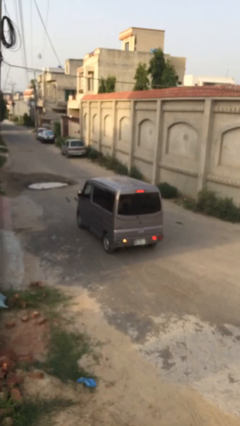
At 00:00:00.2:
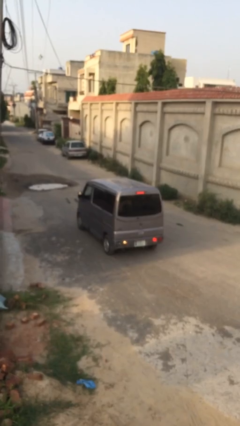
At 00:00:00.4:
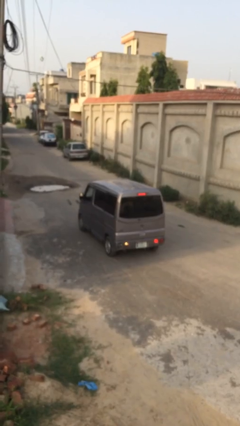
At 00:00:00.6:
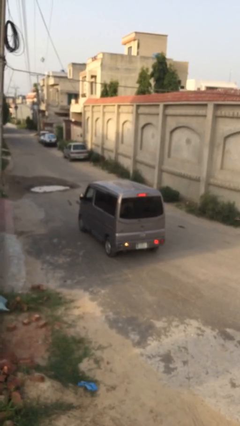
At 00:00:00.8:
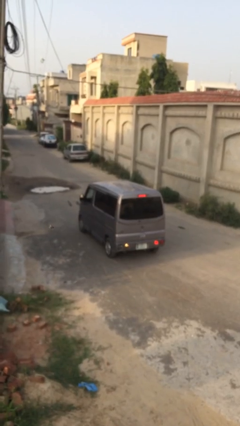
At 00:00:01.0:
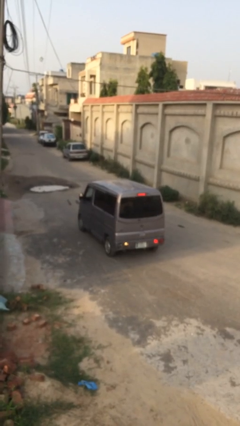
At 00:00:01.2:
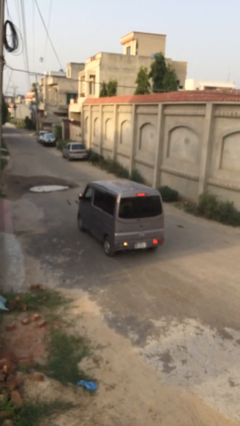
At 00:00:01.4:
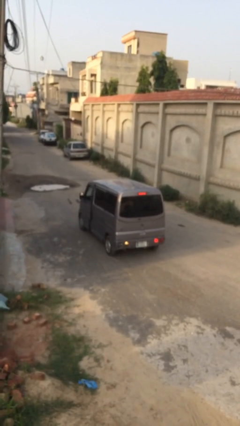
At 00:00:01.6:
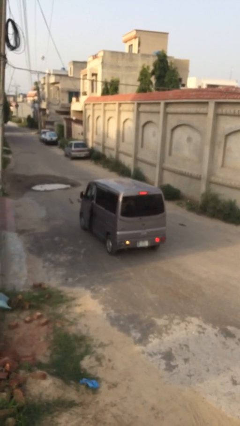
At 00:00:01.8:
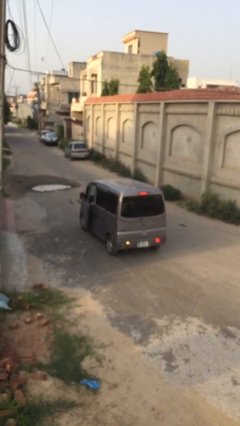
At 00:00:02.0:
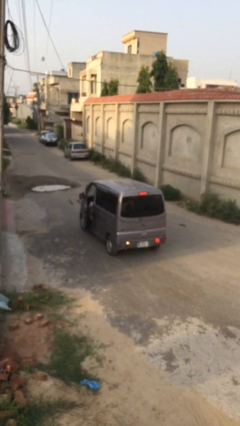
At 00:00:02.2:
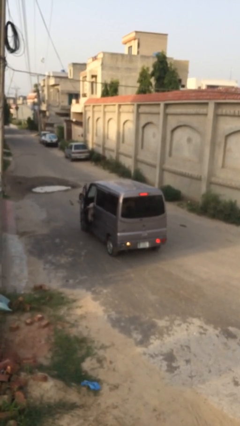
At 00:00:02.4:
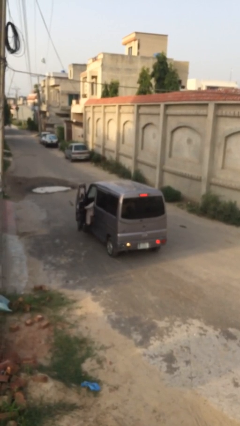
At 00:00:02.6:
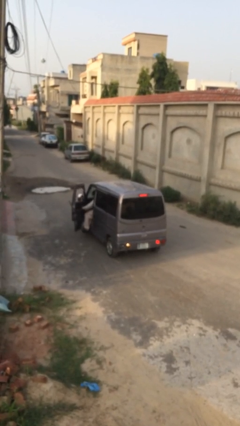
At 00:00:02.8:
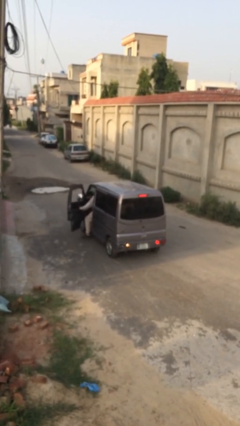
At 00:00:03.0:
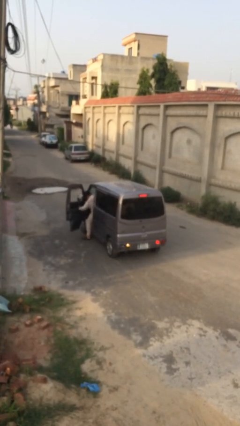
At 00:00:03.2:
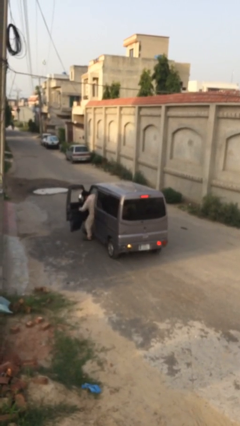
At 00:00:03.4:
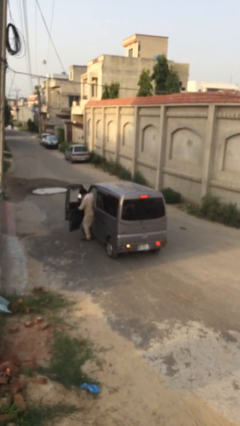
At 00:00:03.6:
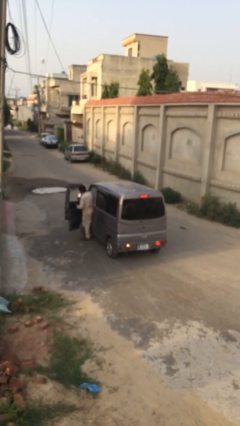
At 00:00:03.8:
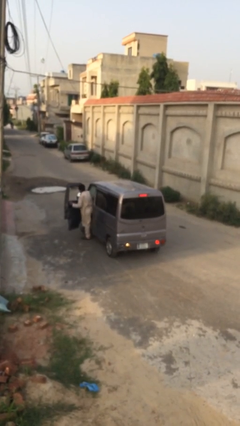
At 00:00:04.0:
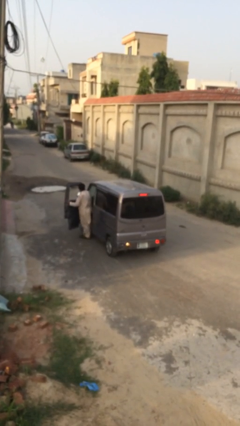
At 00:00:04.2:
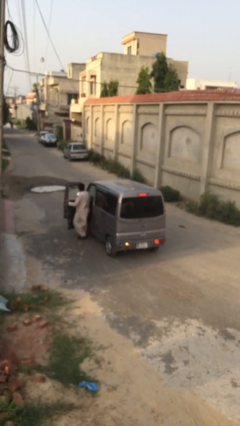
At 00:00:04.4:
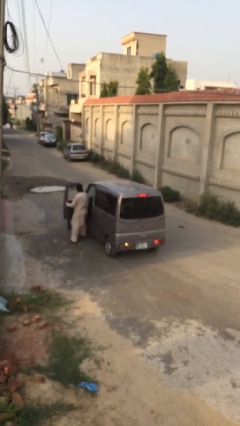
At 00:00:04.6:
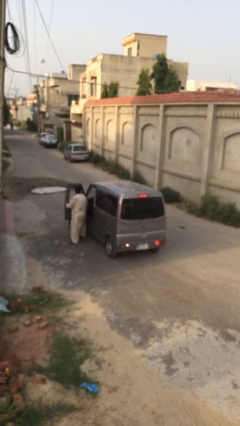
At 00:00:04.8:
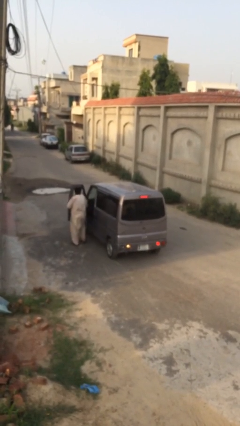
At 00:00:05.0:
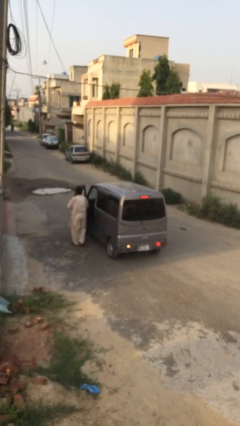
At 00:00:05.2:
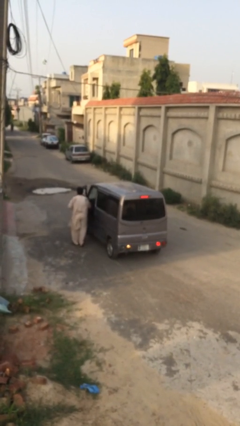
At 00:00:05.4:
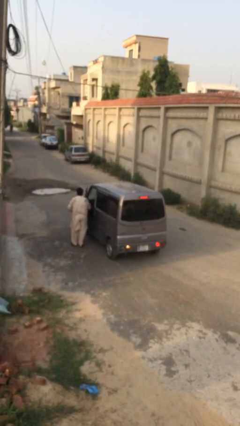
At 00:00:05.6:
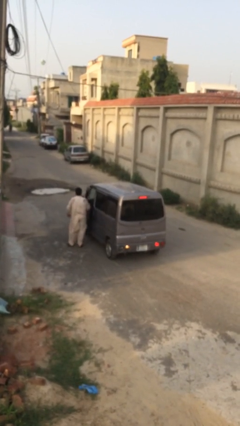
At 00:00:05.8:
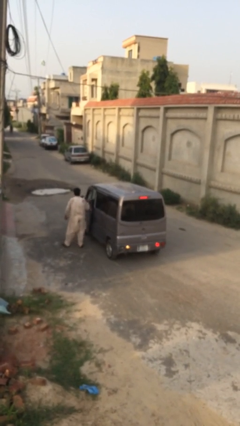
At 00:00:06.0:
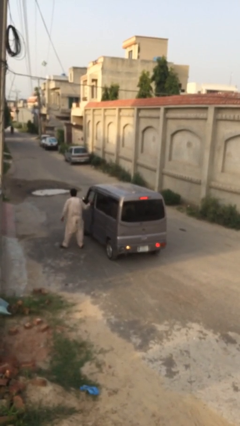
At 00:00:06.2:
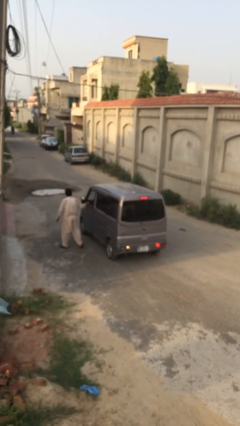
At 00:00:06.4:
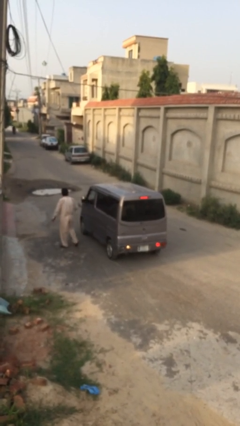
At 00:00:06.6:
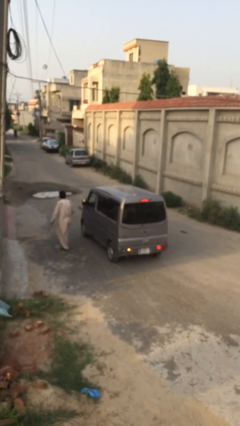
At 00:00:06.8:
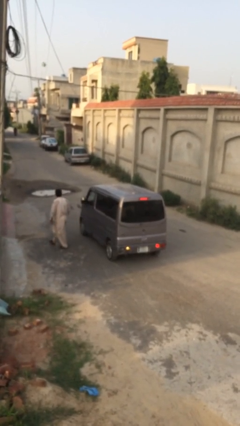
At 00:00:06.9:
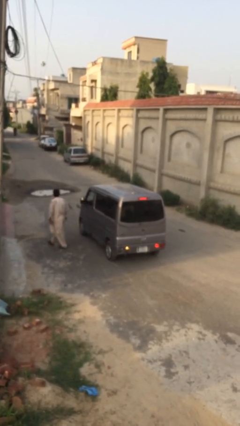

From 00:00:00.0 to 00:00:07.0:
car drops off person

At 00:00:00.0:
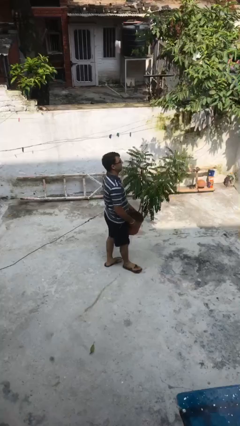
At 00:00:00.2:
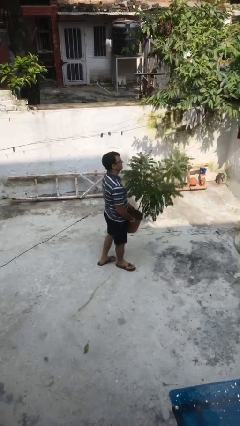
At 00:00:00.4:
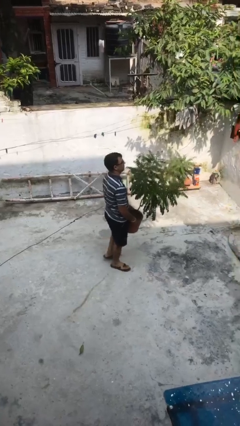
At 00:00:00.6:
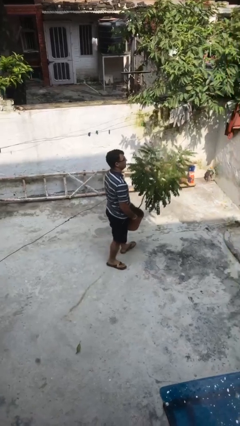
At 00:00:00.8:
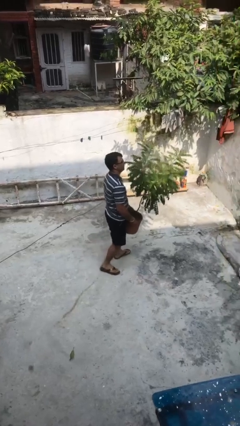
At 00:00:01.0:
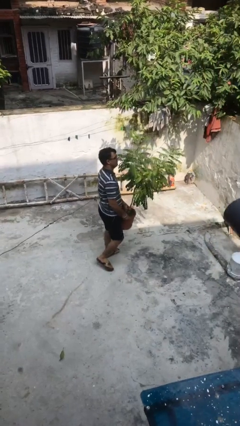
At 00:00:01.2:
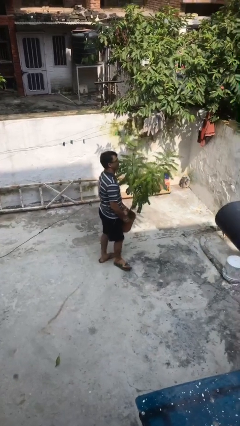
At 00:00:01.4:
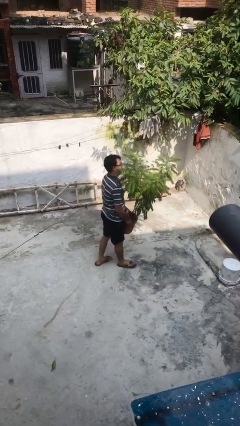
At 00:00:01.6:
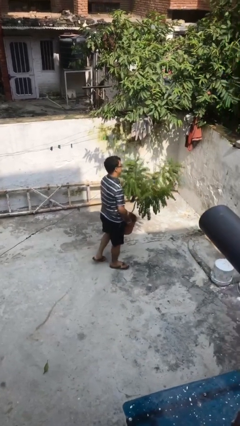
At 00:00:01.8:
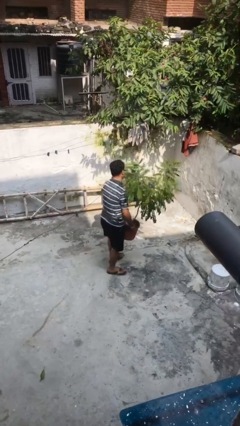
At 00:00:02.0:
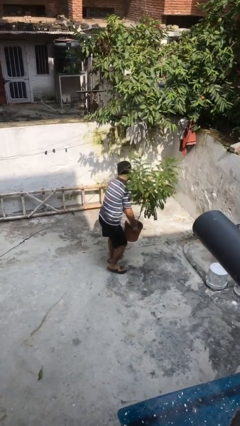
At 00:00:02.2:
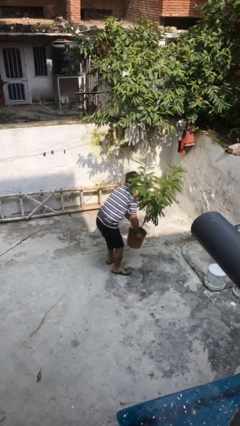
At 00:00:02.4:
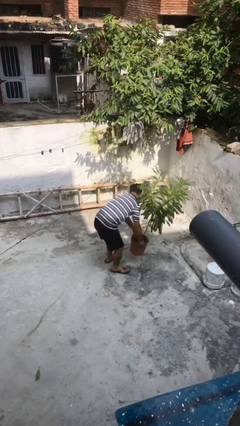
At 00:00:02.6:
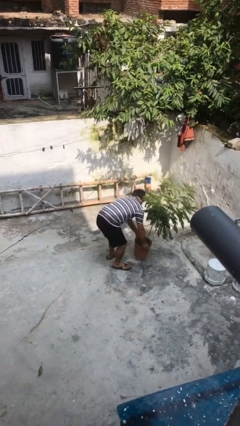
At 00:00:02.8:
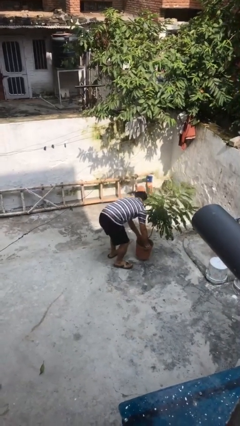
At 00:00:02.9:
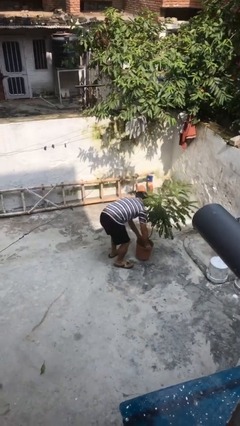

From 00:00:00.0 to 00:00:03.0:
person carries heavy object

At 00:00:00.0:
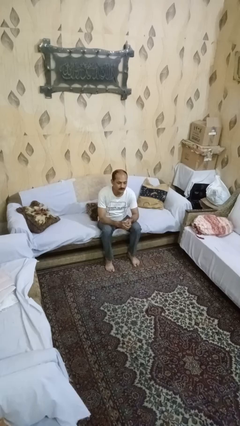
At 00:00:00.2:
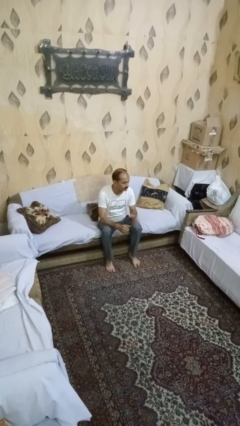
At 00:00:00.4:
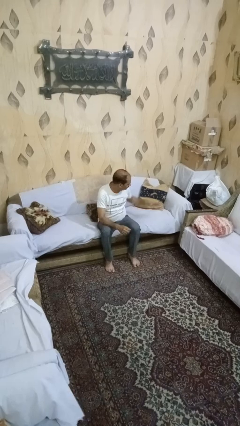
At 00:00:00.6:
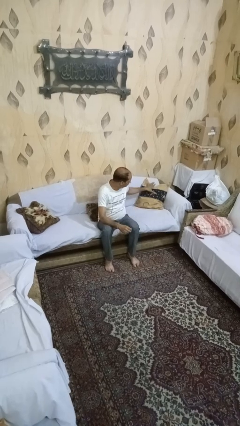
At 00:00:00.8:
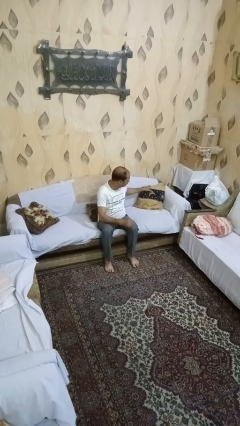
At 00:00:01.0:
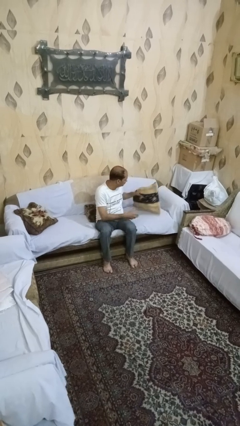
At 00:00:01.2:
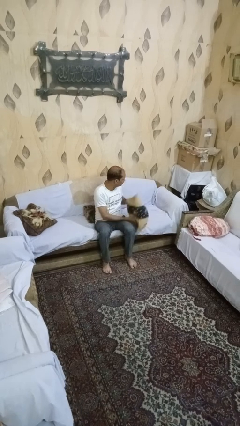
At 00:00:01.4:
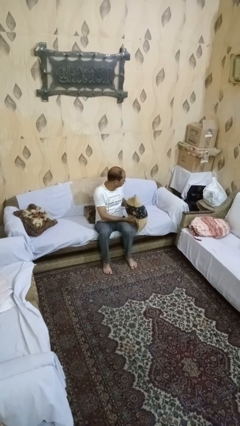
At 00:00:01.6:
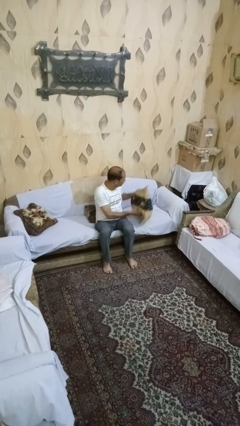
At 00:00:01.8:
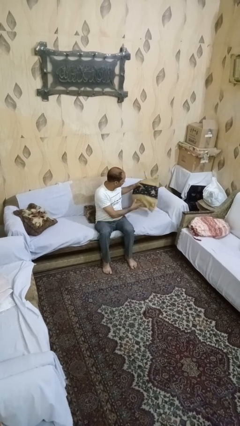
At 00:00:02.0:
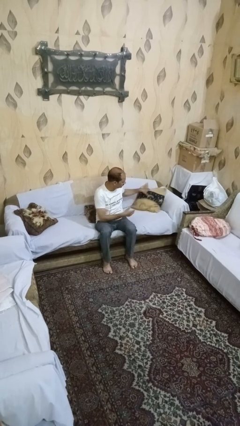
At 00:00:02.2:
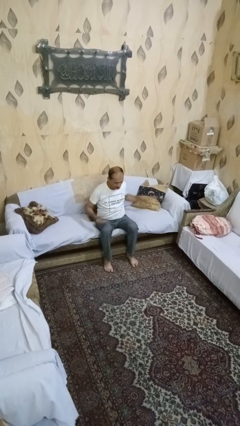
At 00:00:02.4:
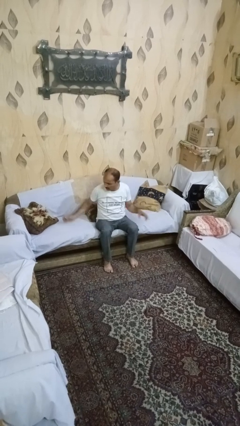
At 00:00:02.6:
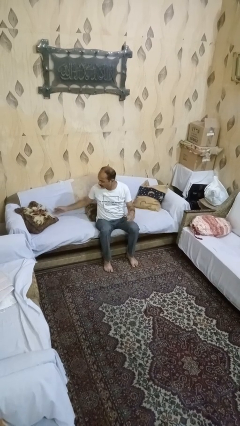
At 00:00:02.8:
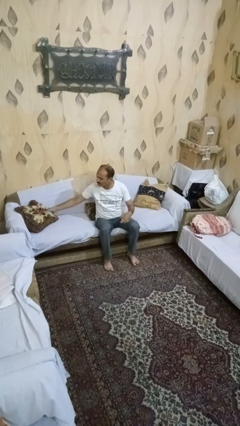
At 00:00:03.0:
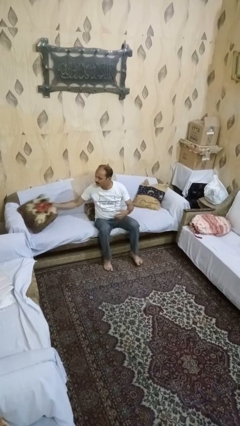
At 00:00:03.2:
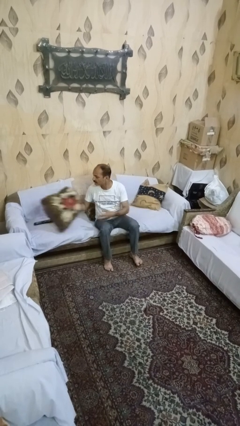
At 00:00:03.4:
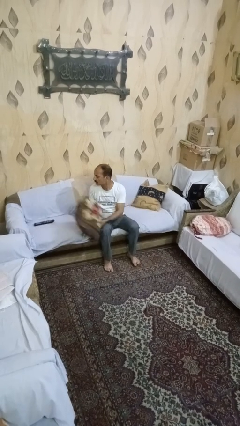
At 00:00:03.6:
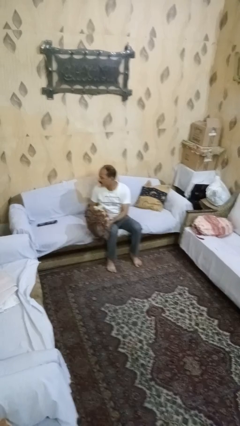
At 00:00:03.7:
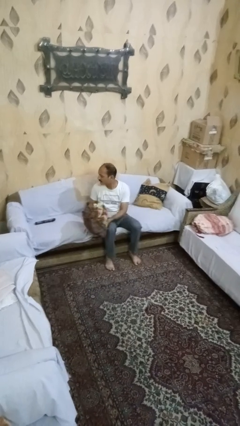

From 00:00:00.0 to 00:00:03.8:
person searches in couch

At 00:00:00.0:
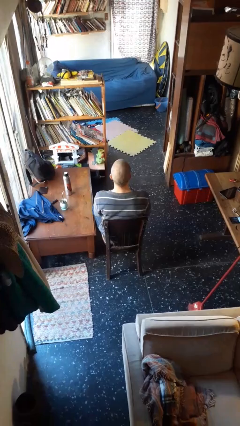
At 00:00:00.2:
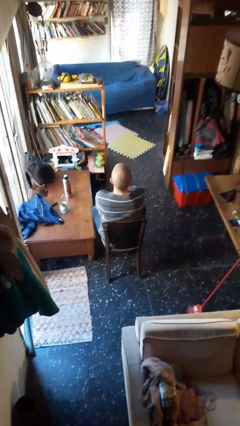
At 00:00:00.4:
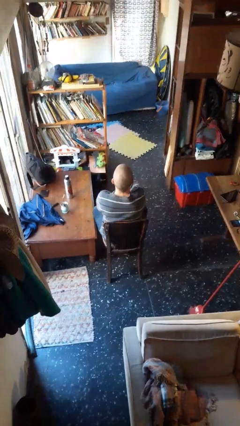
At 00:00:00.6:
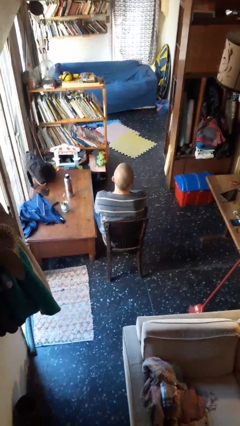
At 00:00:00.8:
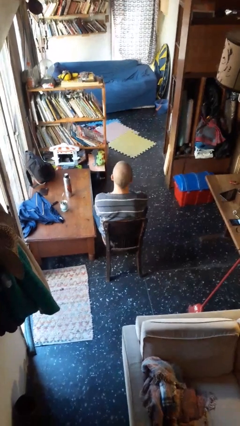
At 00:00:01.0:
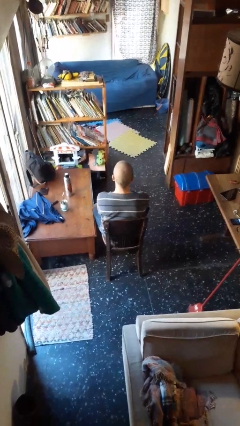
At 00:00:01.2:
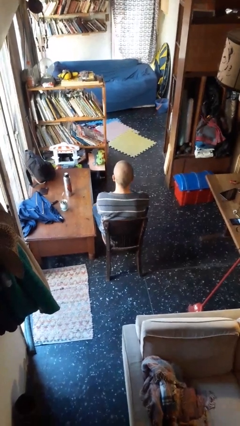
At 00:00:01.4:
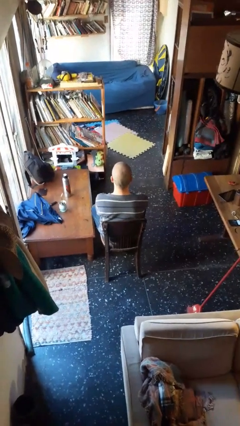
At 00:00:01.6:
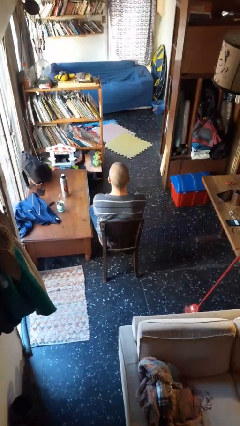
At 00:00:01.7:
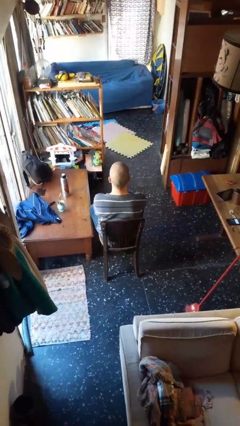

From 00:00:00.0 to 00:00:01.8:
person crosses arms

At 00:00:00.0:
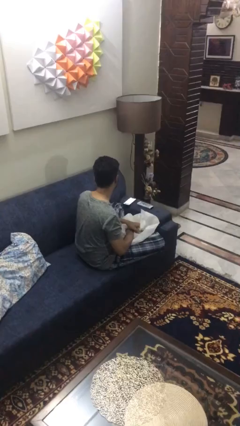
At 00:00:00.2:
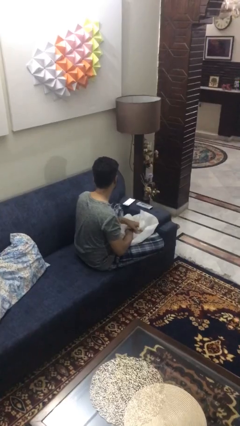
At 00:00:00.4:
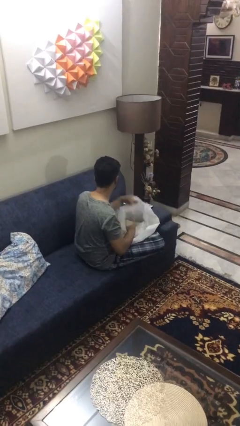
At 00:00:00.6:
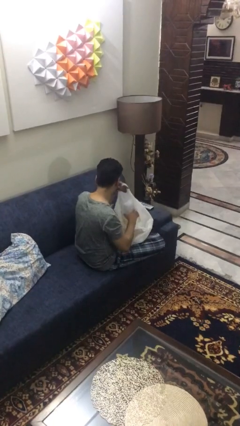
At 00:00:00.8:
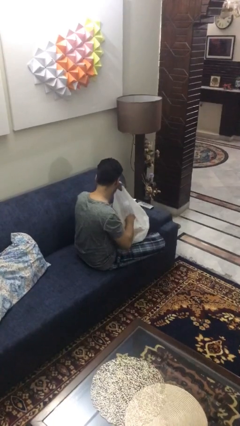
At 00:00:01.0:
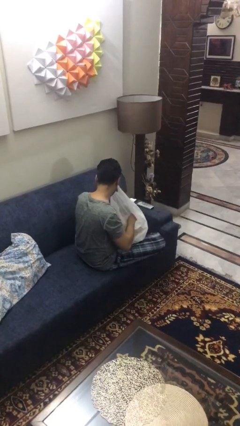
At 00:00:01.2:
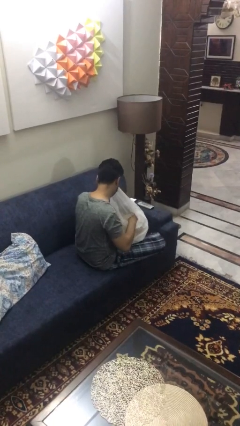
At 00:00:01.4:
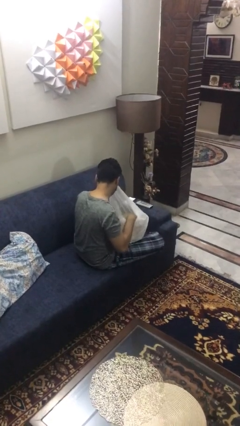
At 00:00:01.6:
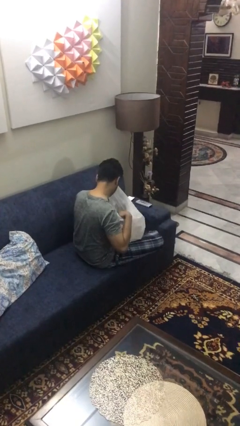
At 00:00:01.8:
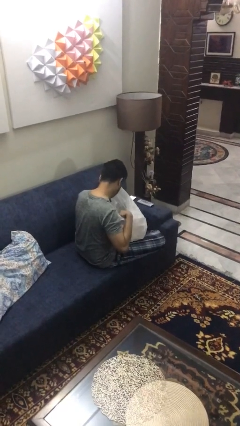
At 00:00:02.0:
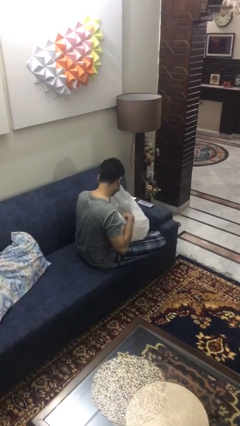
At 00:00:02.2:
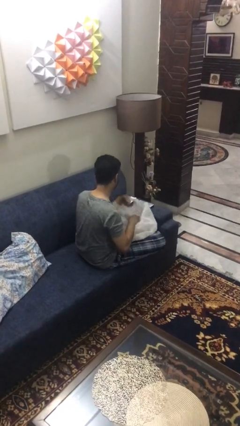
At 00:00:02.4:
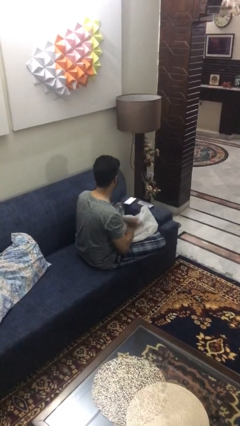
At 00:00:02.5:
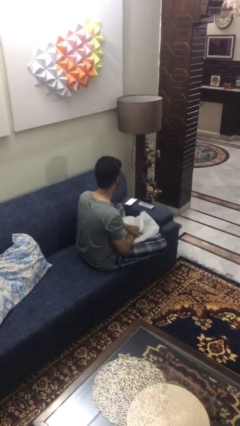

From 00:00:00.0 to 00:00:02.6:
person searches in bag
